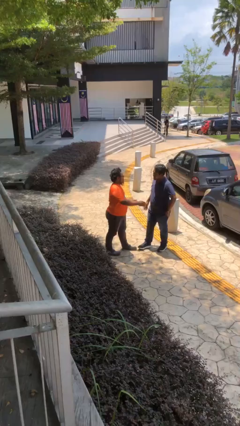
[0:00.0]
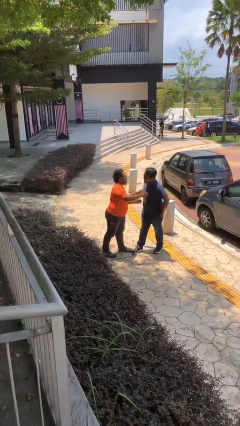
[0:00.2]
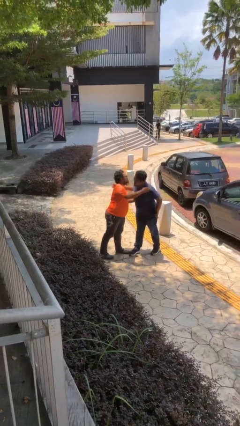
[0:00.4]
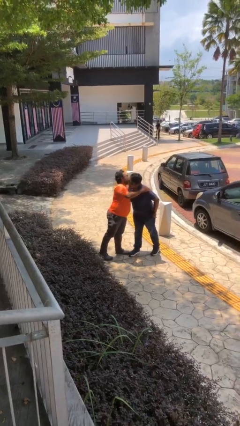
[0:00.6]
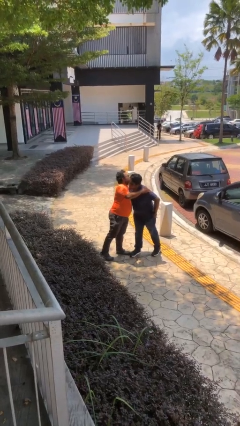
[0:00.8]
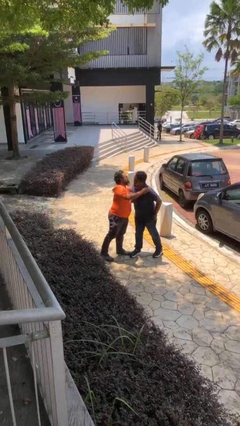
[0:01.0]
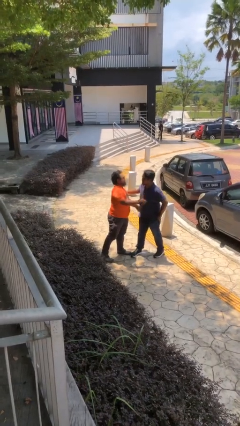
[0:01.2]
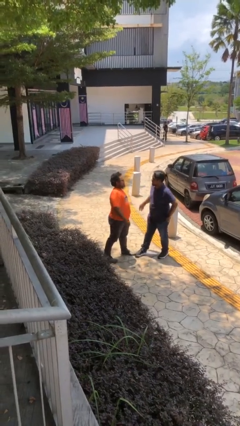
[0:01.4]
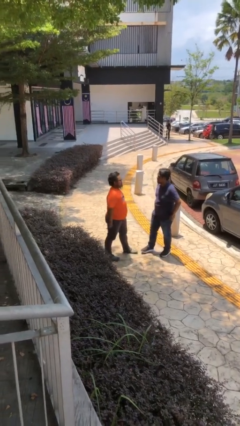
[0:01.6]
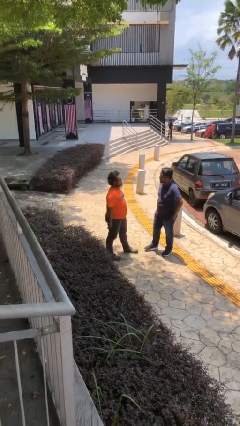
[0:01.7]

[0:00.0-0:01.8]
person embraces person

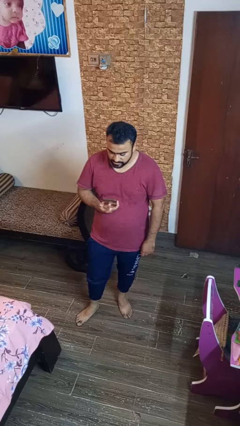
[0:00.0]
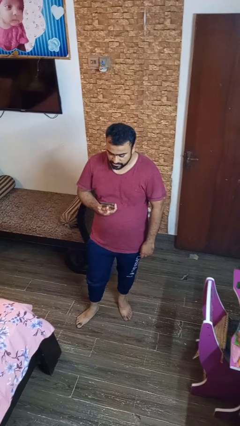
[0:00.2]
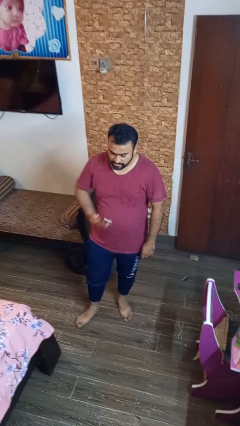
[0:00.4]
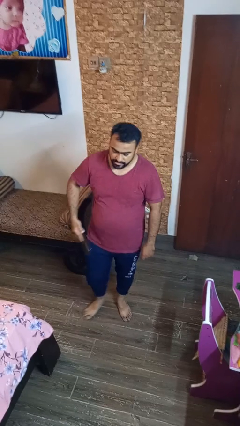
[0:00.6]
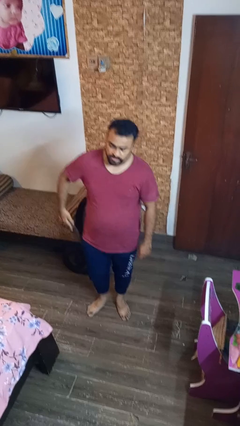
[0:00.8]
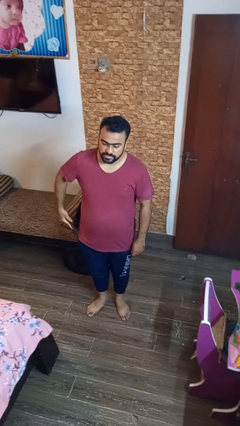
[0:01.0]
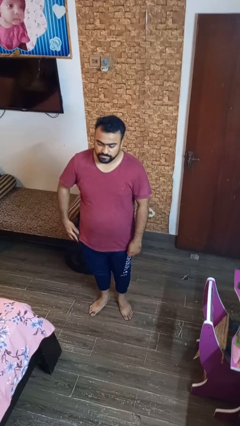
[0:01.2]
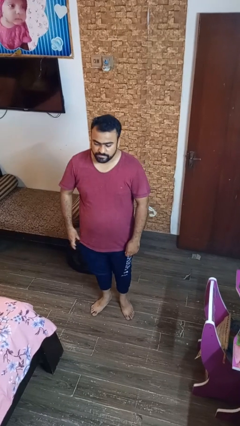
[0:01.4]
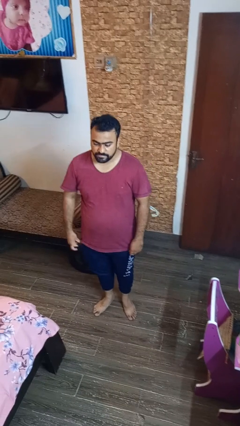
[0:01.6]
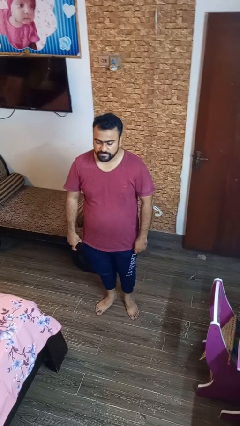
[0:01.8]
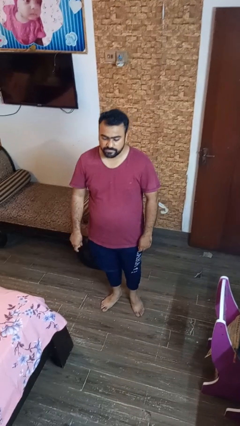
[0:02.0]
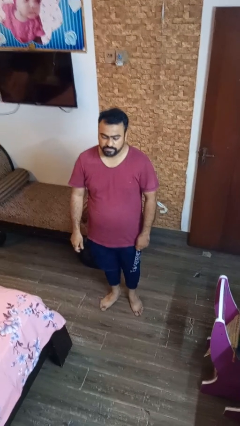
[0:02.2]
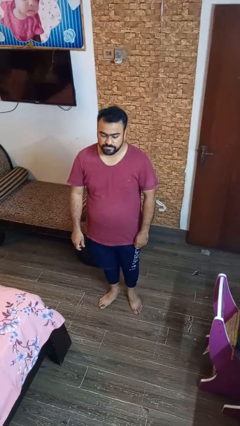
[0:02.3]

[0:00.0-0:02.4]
person puts phone into pocket

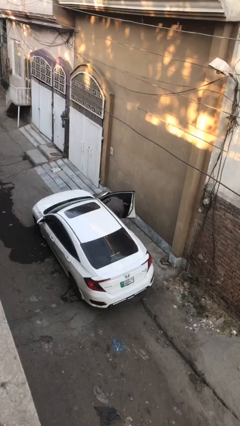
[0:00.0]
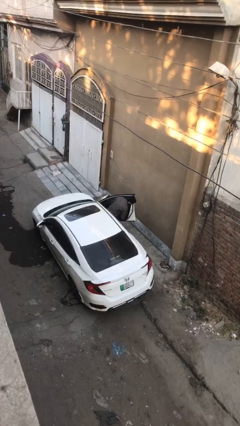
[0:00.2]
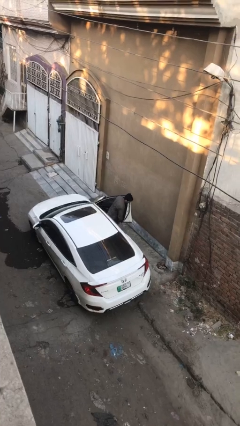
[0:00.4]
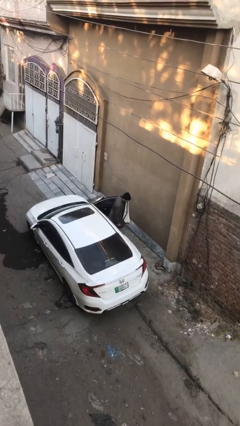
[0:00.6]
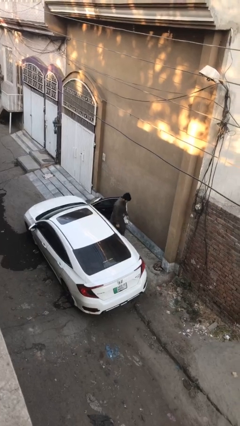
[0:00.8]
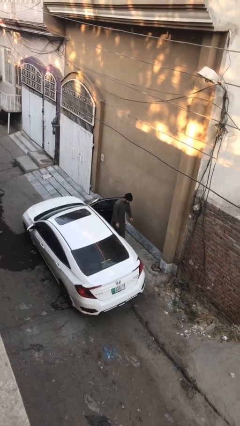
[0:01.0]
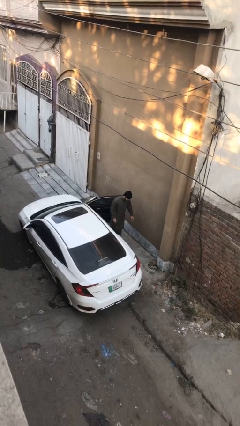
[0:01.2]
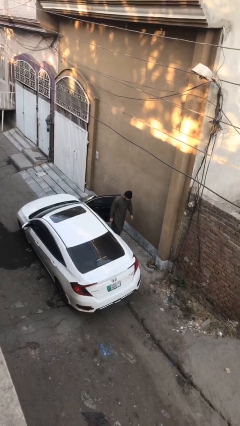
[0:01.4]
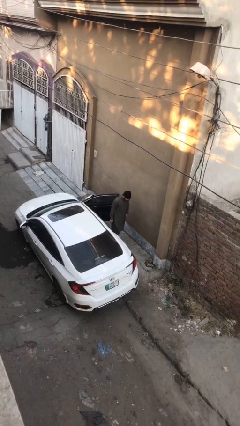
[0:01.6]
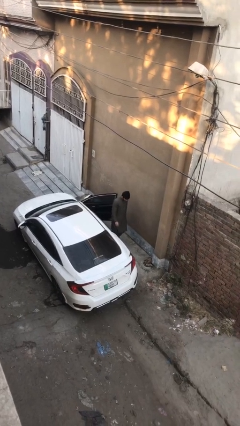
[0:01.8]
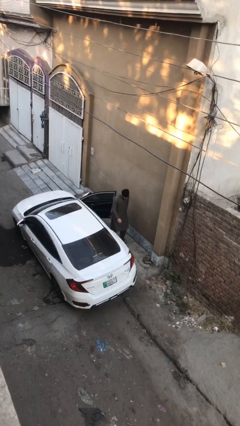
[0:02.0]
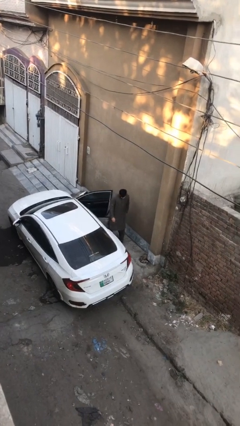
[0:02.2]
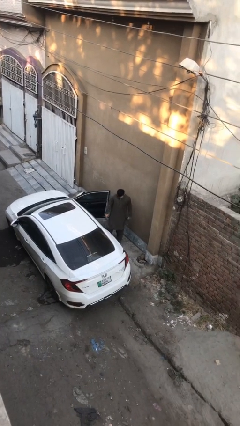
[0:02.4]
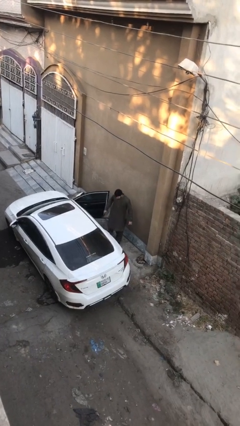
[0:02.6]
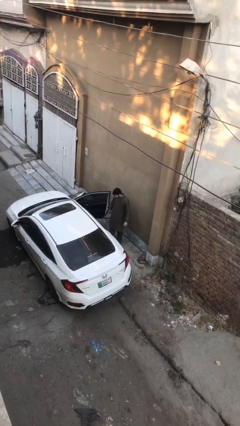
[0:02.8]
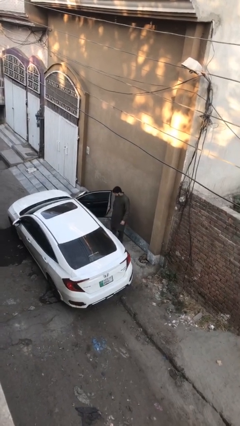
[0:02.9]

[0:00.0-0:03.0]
person exits car

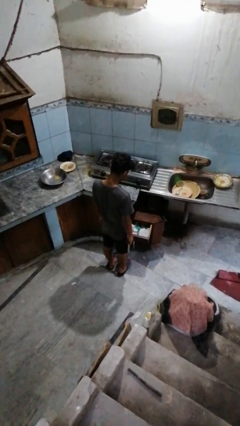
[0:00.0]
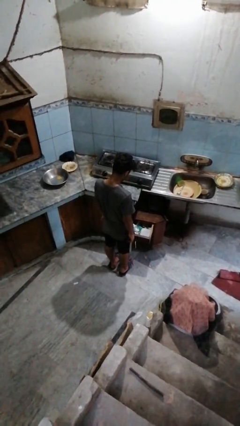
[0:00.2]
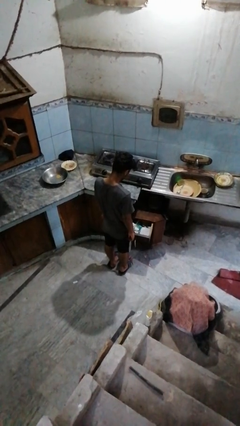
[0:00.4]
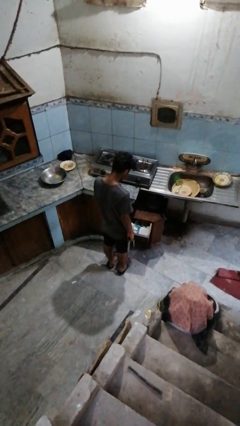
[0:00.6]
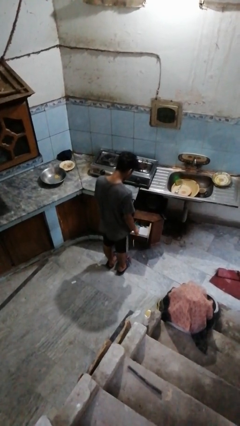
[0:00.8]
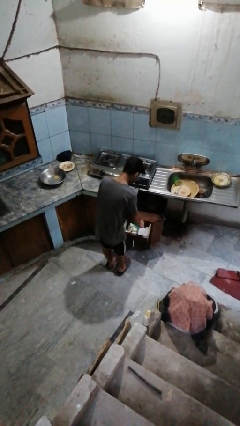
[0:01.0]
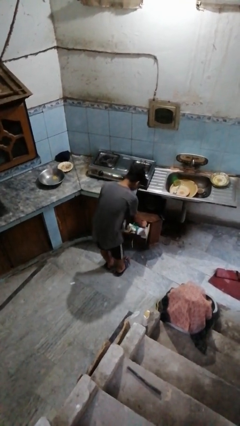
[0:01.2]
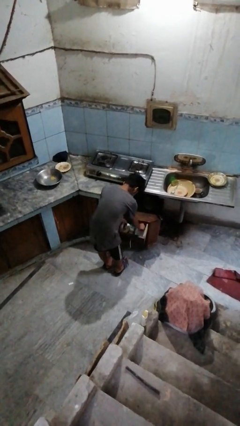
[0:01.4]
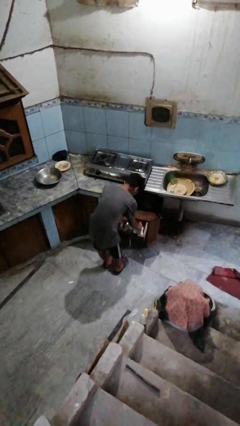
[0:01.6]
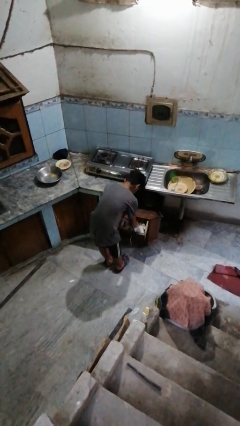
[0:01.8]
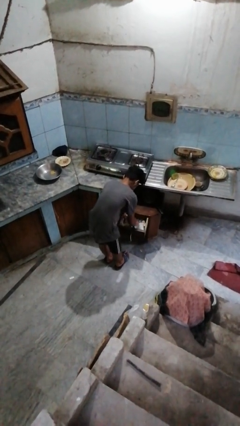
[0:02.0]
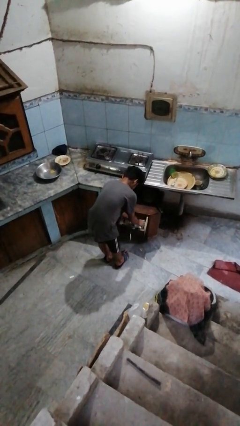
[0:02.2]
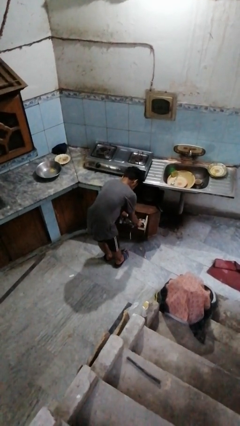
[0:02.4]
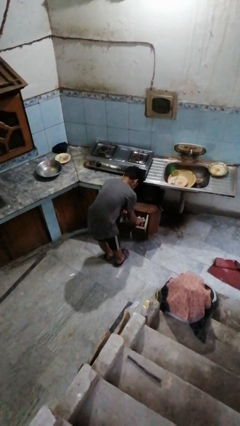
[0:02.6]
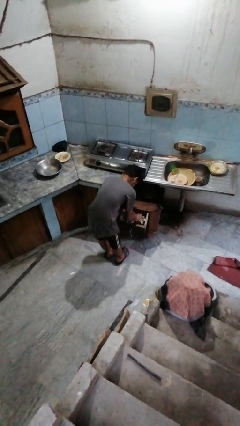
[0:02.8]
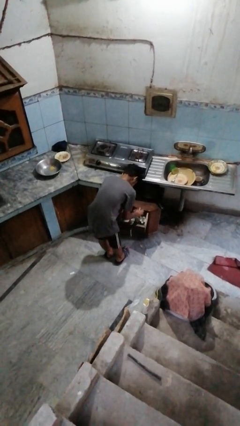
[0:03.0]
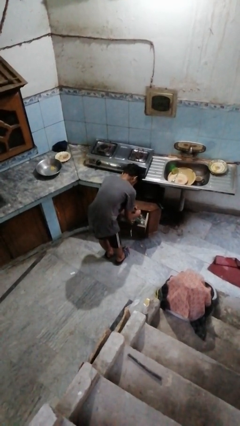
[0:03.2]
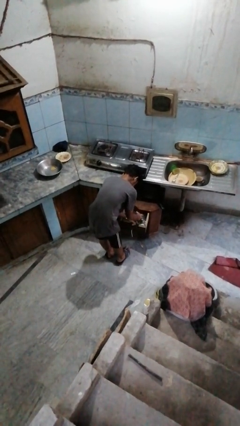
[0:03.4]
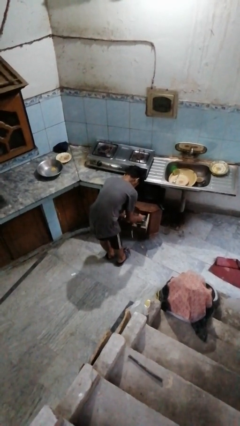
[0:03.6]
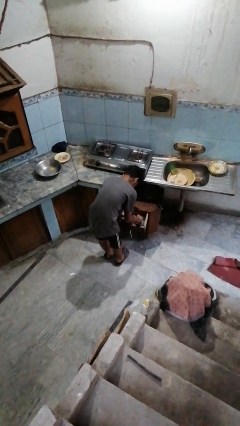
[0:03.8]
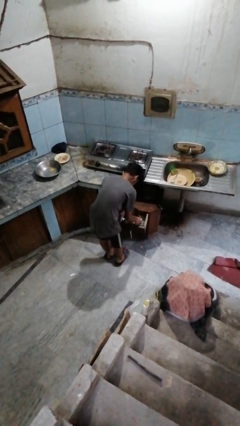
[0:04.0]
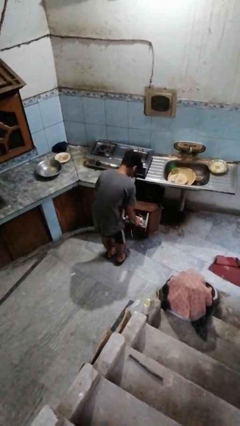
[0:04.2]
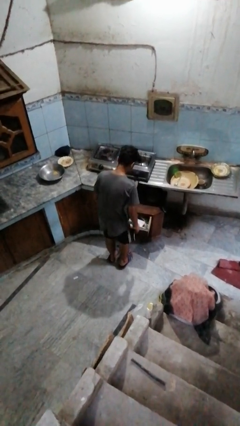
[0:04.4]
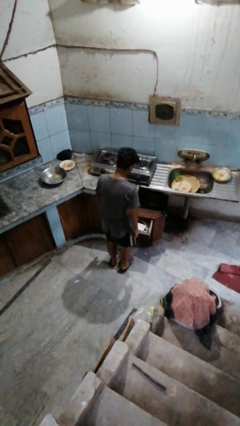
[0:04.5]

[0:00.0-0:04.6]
person searches in kitchen drawer

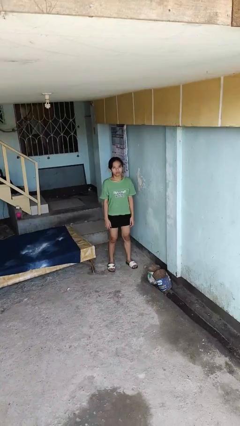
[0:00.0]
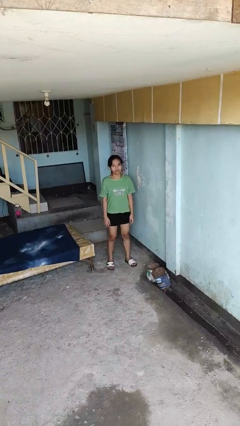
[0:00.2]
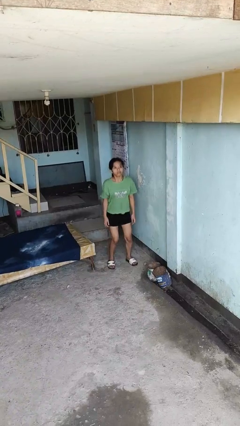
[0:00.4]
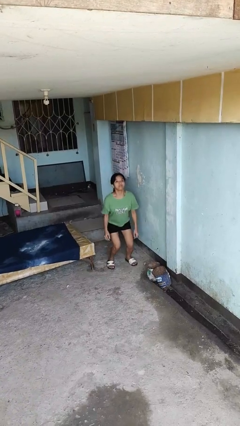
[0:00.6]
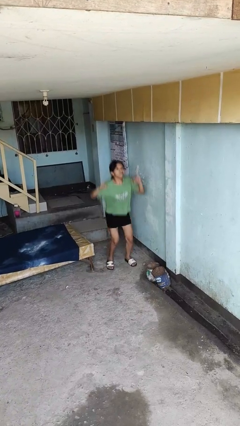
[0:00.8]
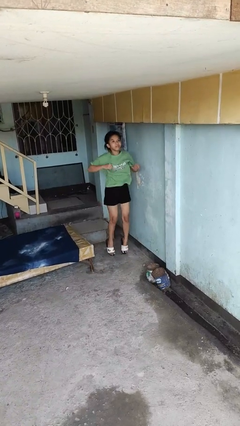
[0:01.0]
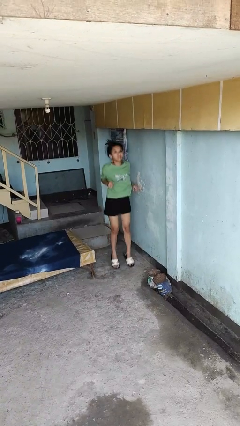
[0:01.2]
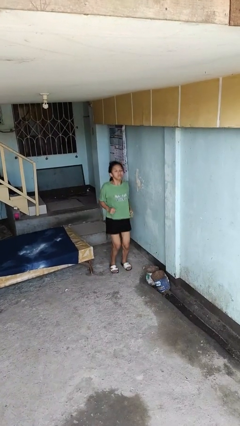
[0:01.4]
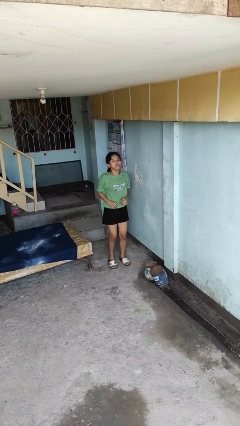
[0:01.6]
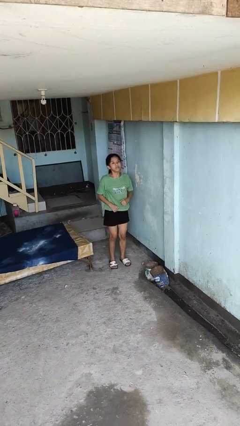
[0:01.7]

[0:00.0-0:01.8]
person jumps

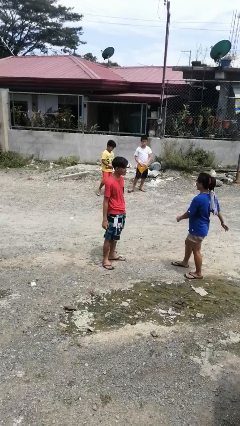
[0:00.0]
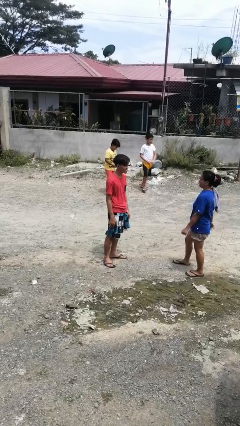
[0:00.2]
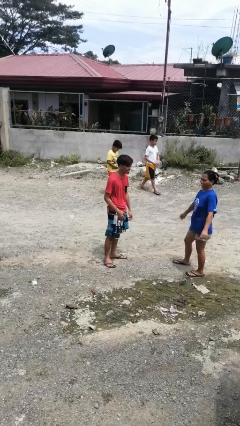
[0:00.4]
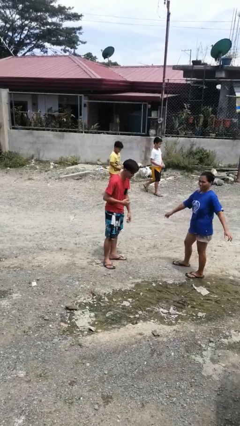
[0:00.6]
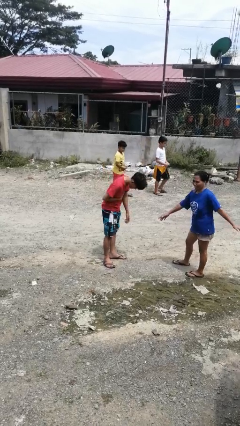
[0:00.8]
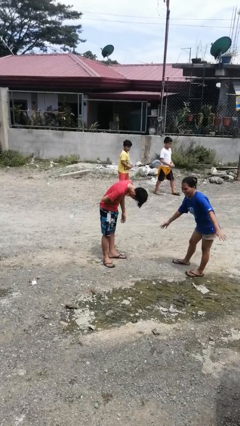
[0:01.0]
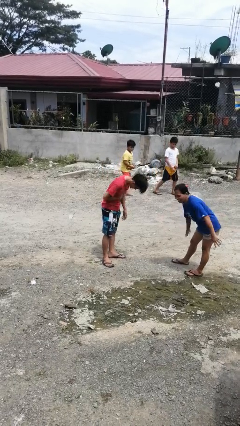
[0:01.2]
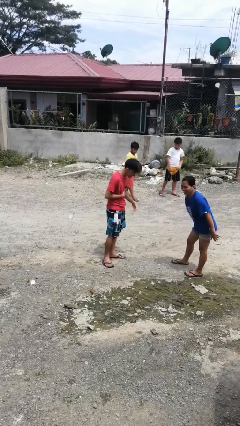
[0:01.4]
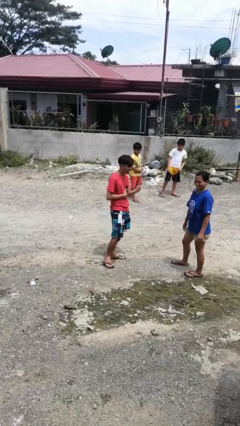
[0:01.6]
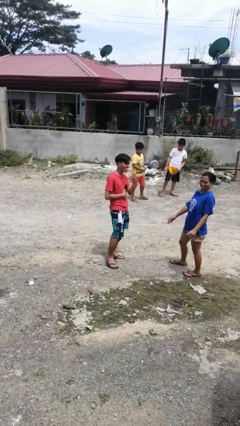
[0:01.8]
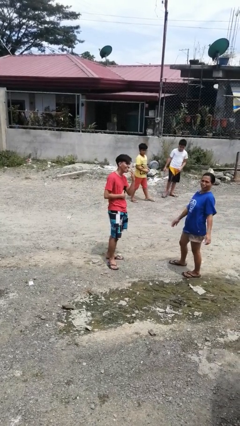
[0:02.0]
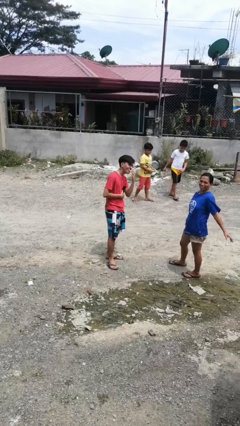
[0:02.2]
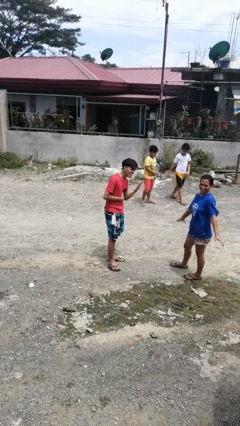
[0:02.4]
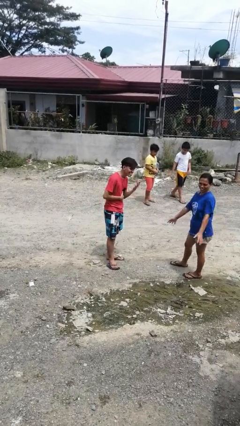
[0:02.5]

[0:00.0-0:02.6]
person laughs with person

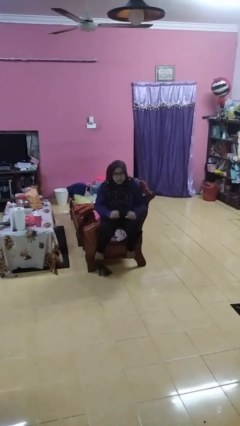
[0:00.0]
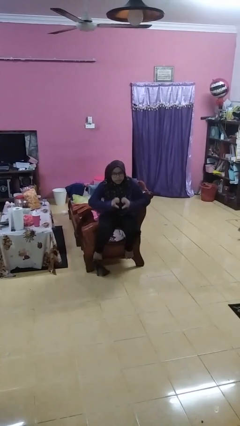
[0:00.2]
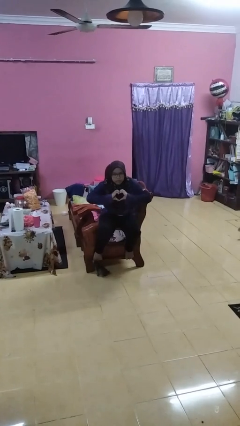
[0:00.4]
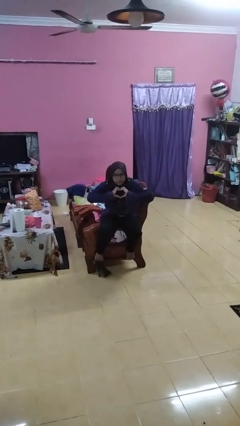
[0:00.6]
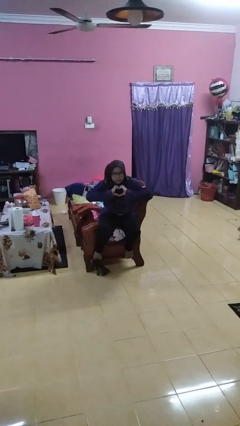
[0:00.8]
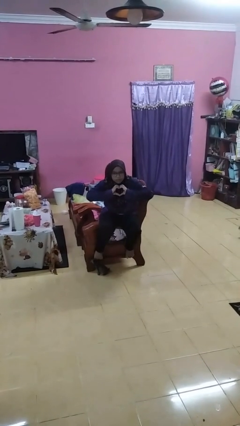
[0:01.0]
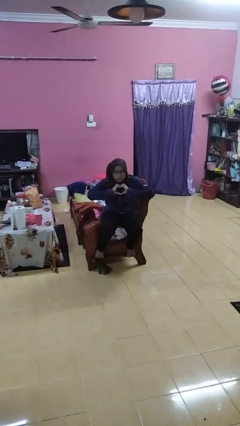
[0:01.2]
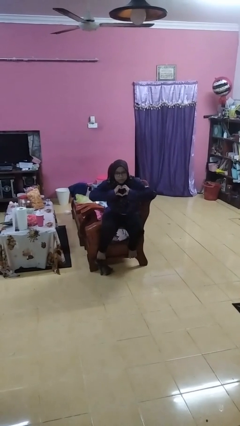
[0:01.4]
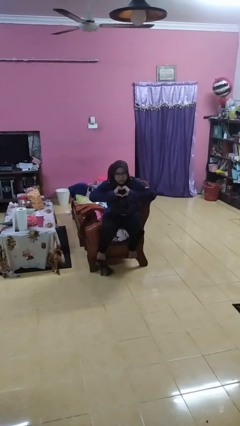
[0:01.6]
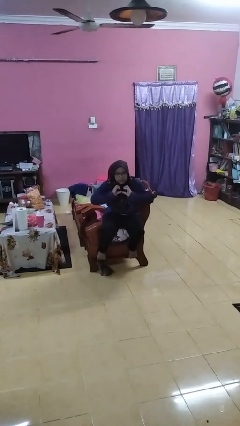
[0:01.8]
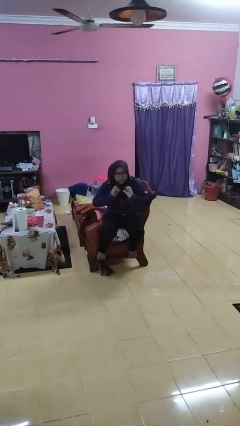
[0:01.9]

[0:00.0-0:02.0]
person gestures heart
